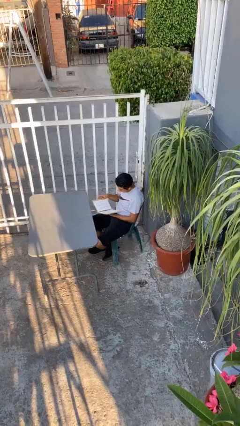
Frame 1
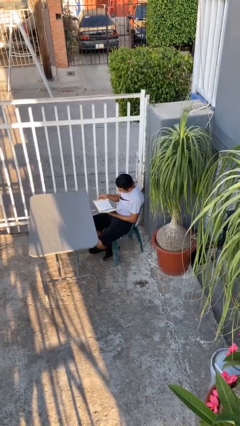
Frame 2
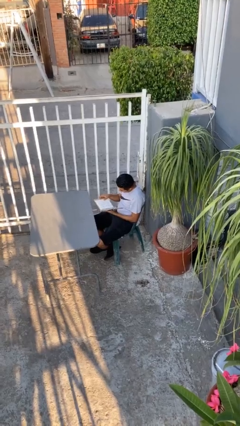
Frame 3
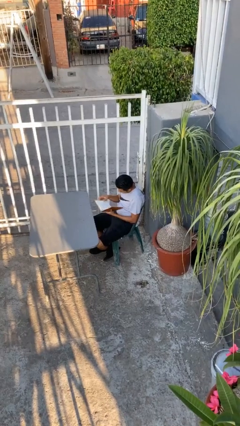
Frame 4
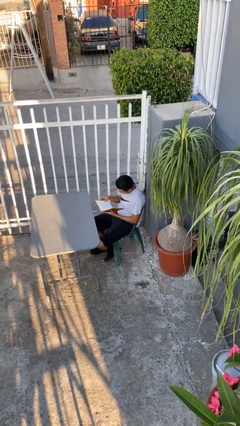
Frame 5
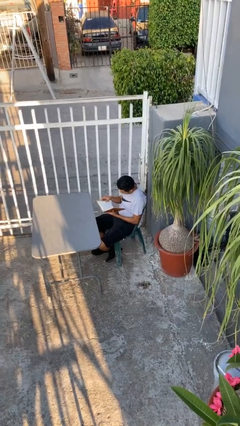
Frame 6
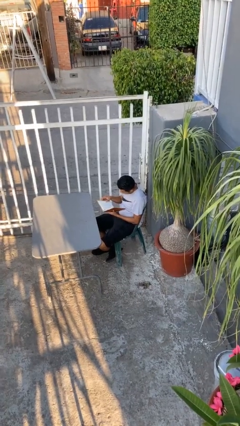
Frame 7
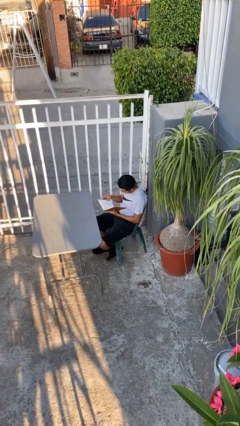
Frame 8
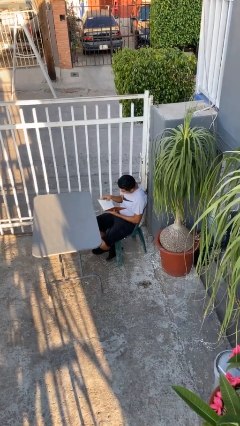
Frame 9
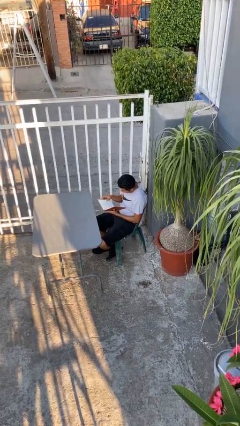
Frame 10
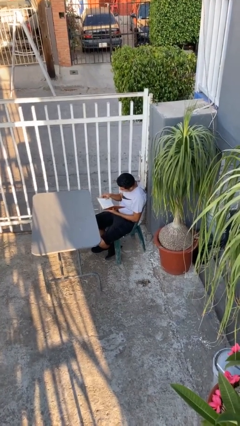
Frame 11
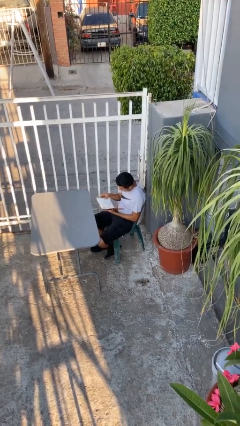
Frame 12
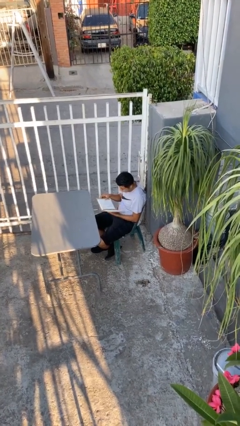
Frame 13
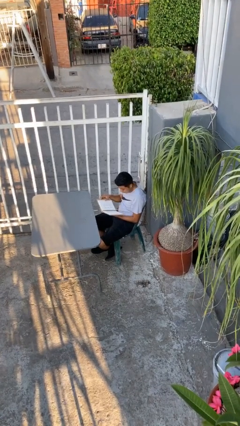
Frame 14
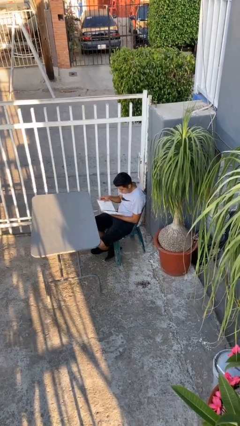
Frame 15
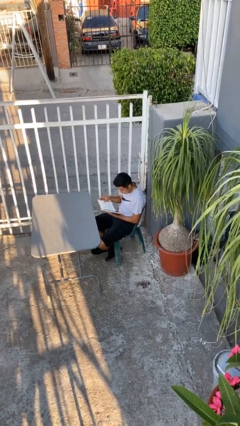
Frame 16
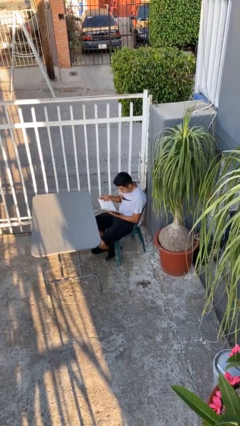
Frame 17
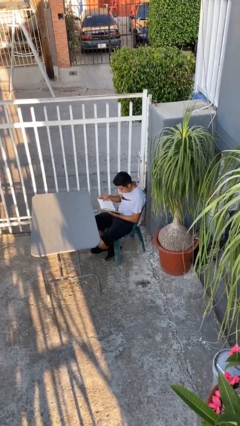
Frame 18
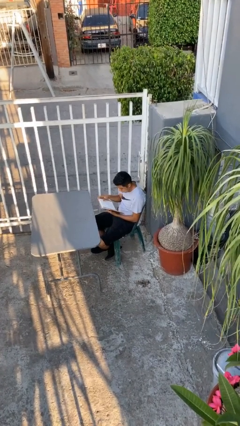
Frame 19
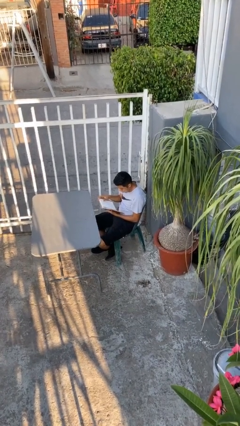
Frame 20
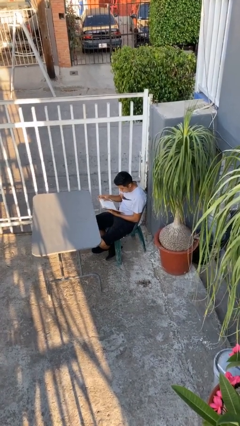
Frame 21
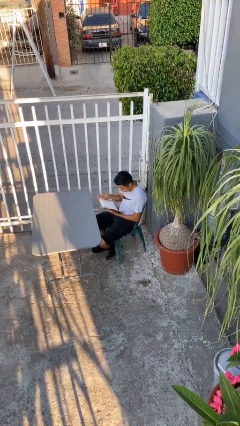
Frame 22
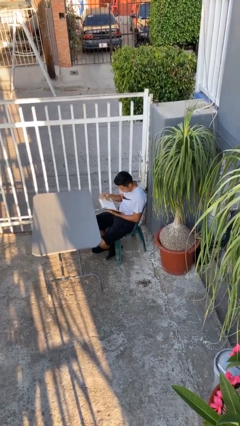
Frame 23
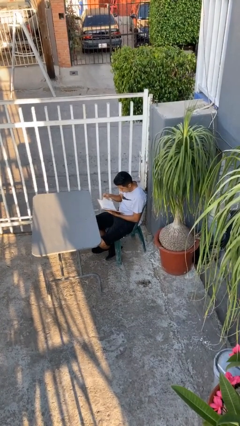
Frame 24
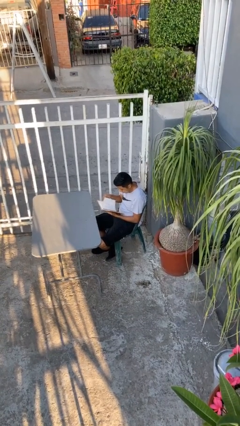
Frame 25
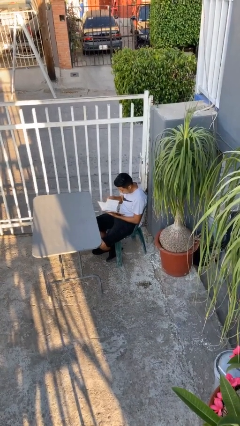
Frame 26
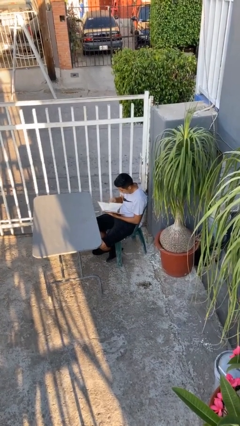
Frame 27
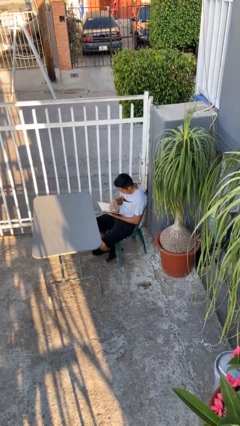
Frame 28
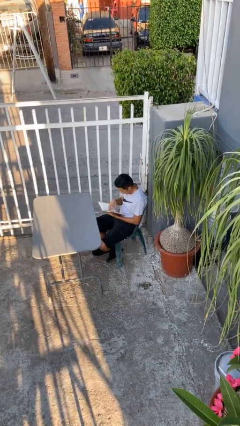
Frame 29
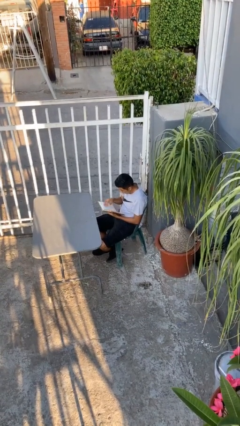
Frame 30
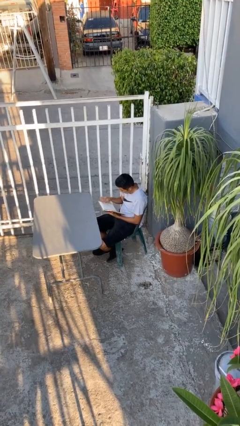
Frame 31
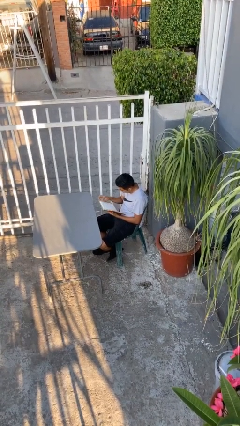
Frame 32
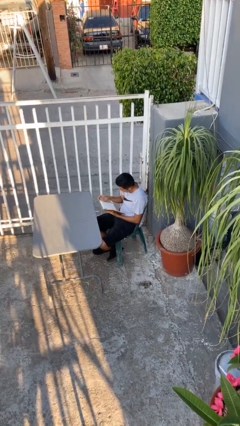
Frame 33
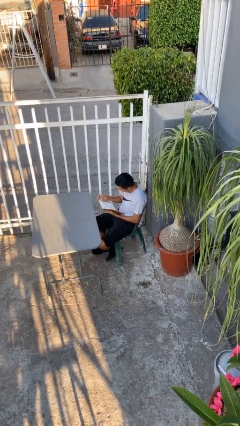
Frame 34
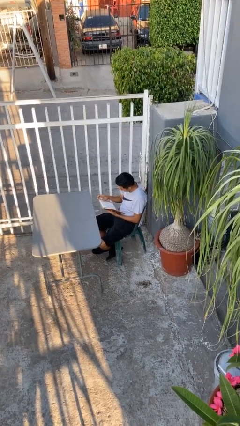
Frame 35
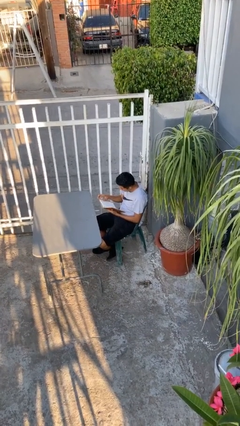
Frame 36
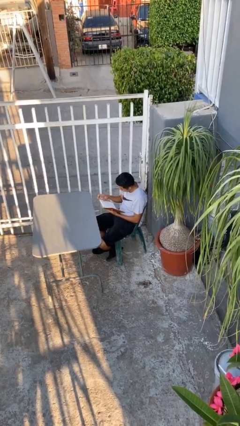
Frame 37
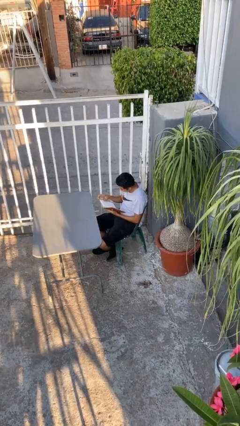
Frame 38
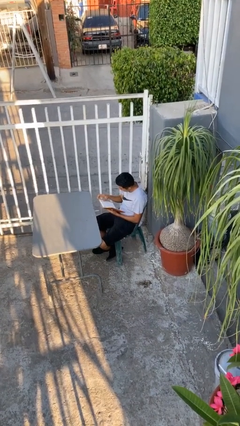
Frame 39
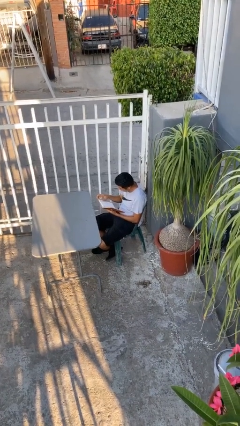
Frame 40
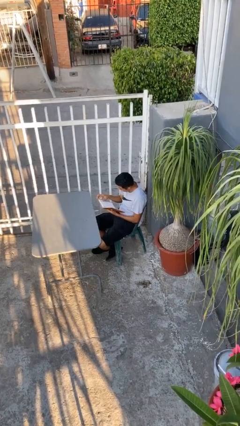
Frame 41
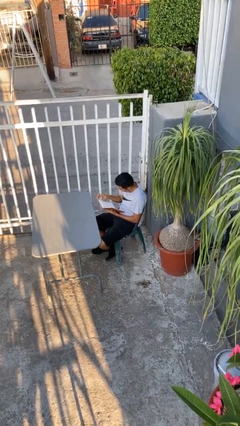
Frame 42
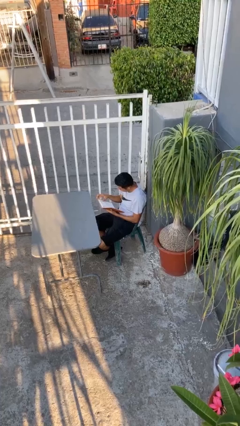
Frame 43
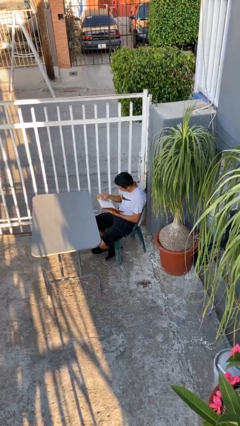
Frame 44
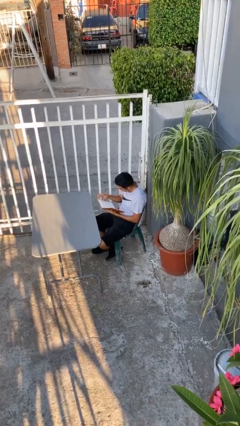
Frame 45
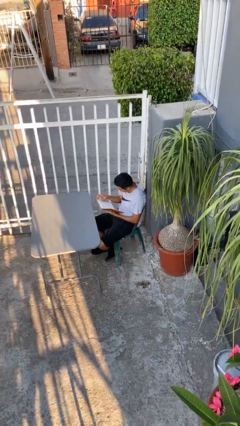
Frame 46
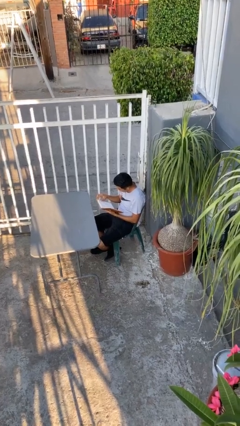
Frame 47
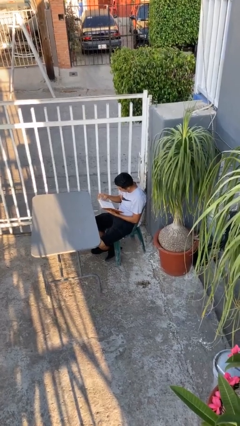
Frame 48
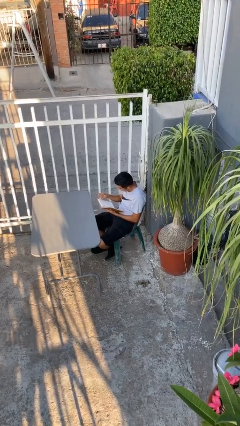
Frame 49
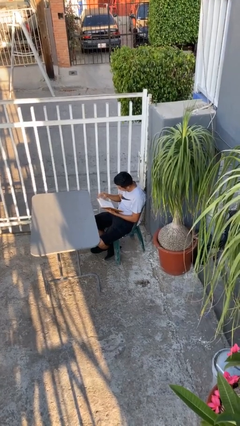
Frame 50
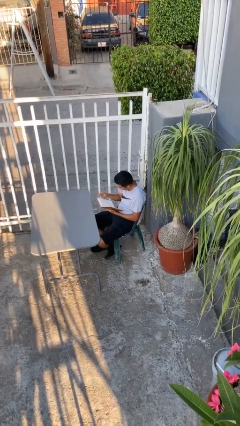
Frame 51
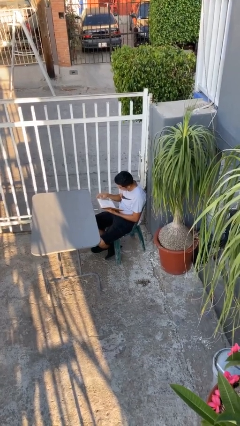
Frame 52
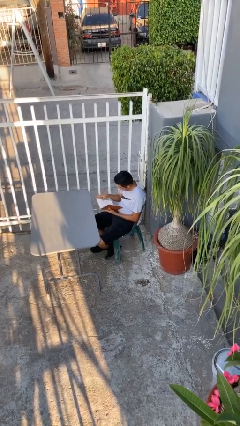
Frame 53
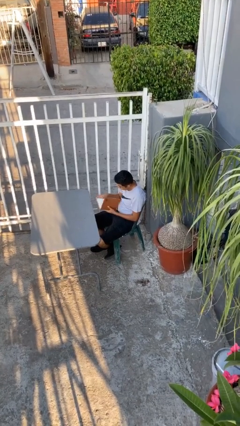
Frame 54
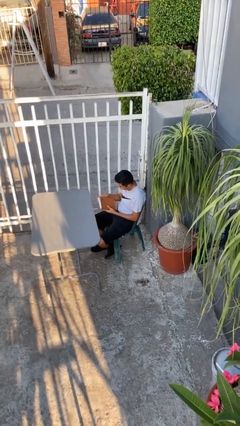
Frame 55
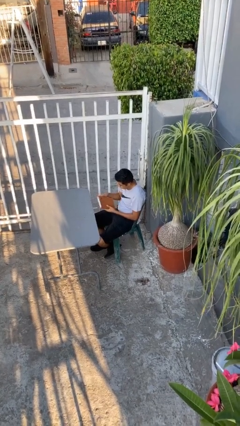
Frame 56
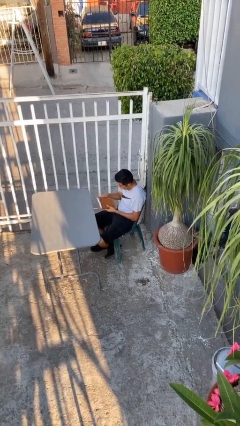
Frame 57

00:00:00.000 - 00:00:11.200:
person reads document

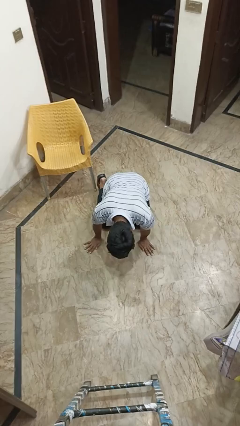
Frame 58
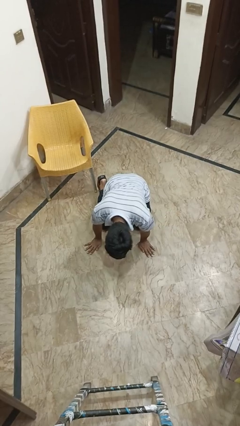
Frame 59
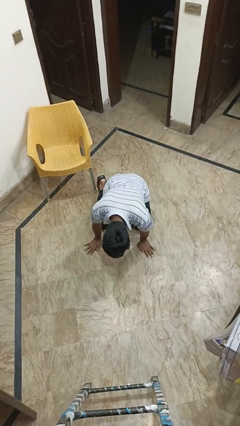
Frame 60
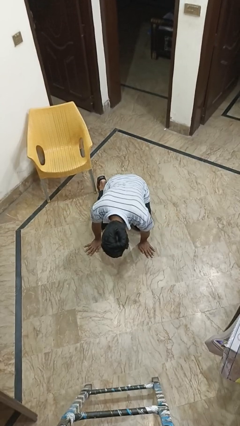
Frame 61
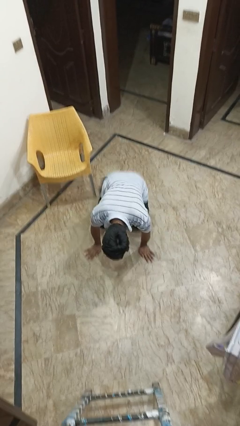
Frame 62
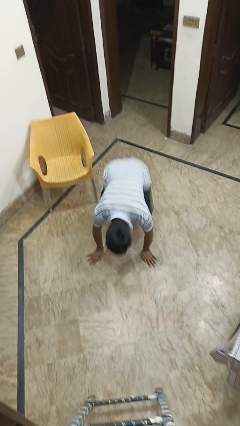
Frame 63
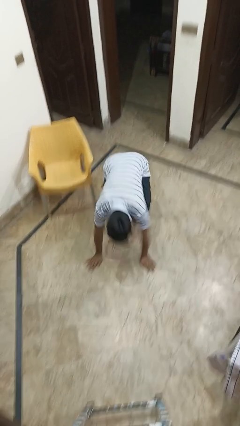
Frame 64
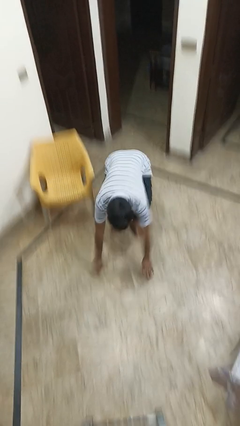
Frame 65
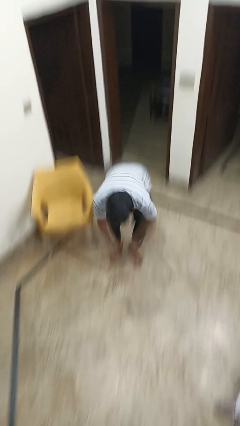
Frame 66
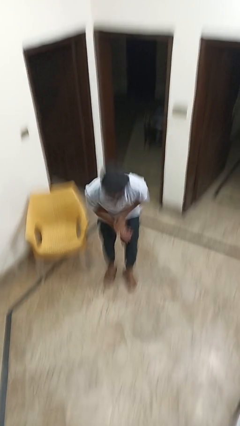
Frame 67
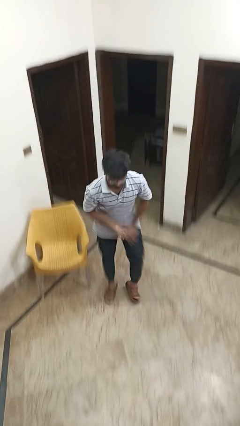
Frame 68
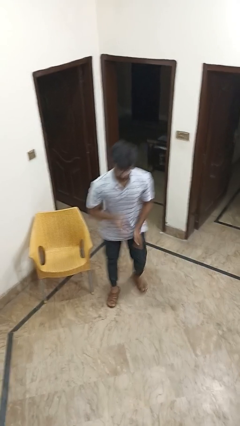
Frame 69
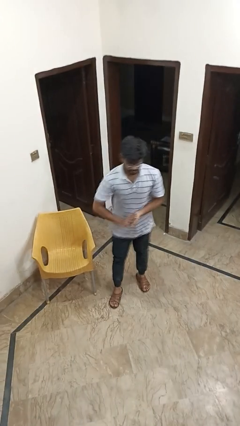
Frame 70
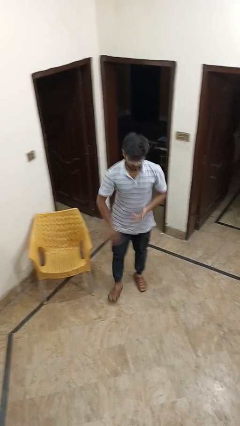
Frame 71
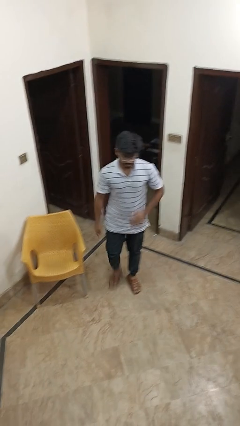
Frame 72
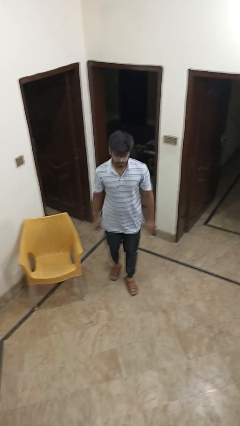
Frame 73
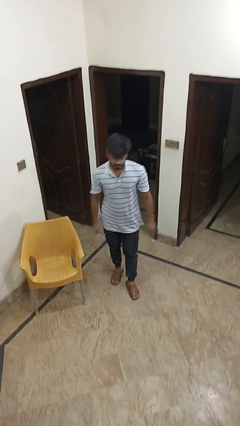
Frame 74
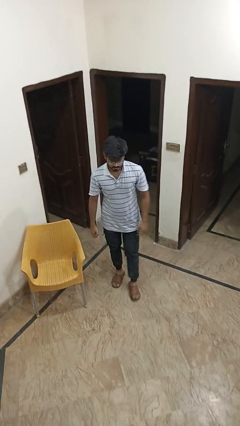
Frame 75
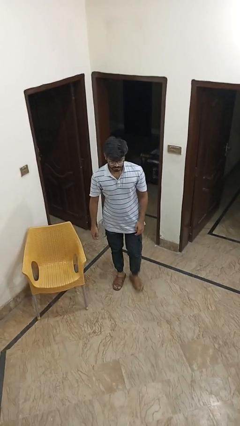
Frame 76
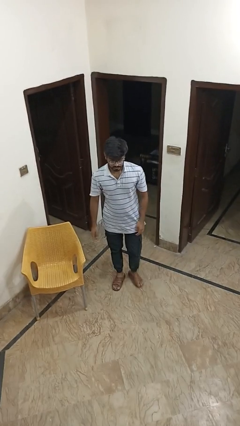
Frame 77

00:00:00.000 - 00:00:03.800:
person stands up from floor

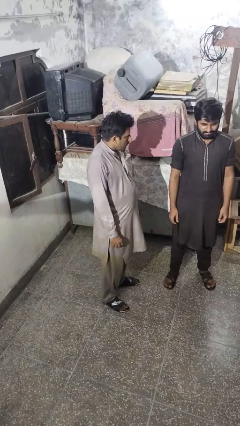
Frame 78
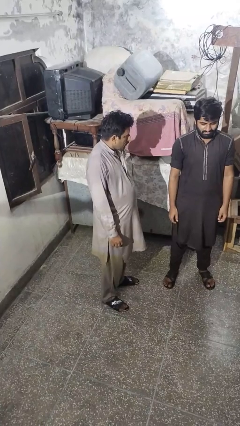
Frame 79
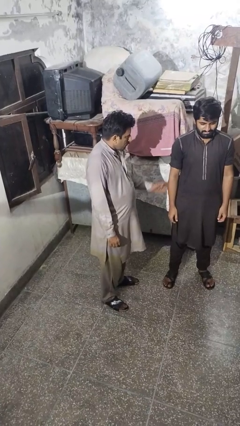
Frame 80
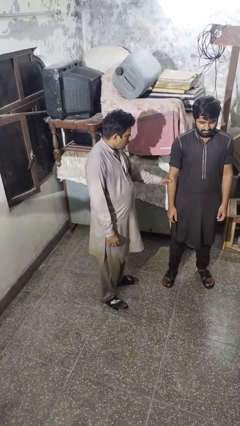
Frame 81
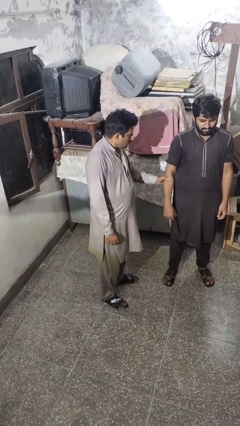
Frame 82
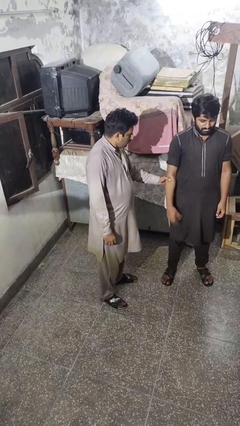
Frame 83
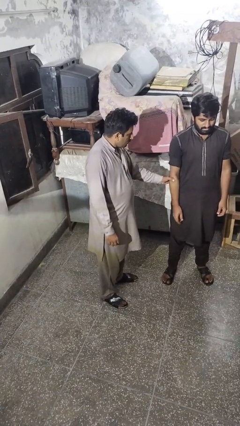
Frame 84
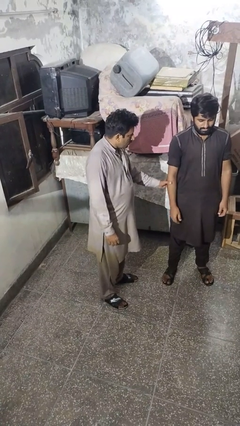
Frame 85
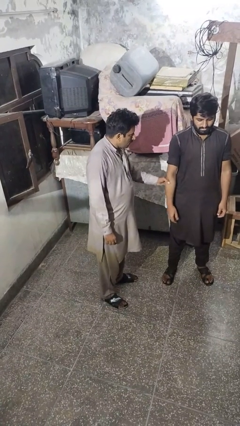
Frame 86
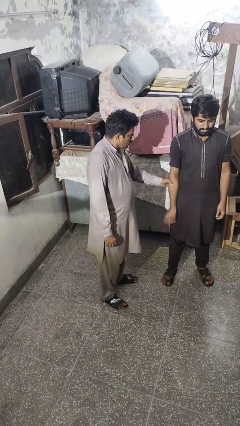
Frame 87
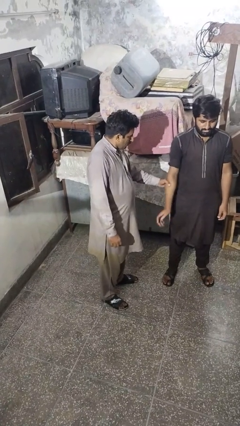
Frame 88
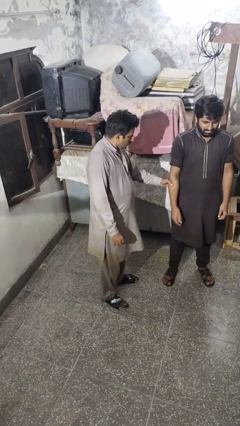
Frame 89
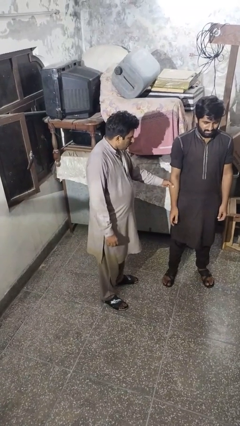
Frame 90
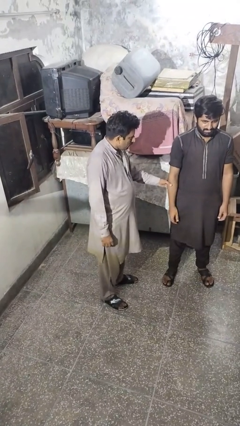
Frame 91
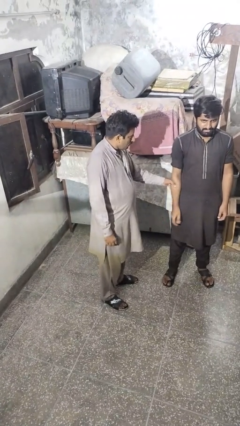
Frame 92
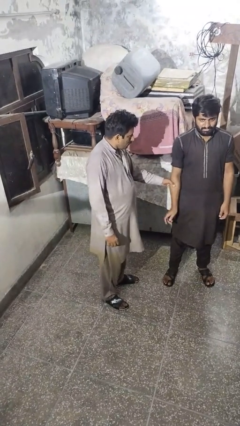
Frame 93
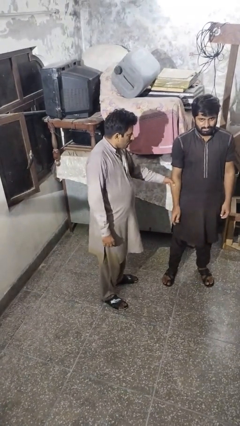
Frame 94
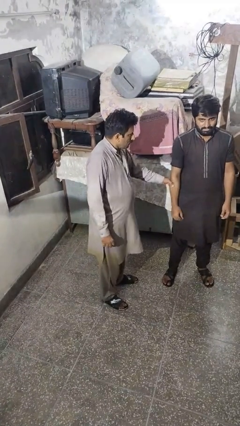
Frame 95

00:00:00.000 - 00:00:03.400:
person grabs person by forearm
